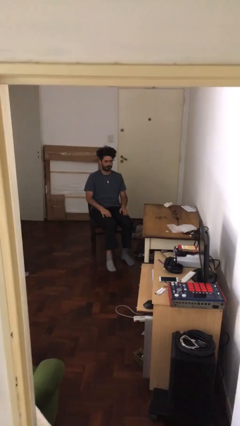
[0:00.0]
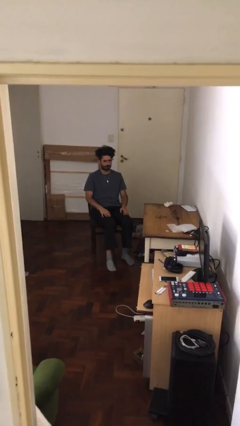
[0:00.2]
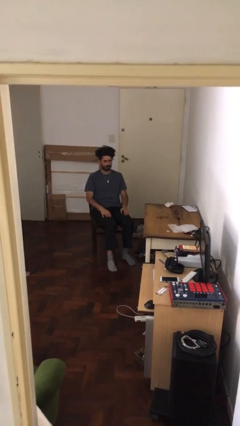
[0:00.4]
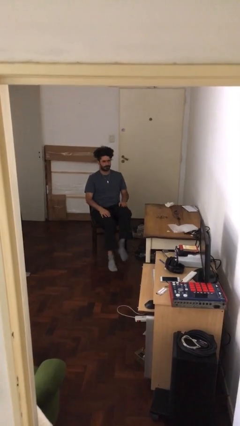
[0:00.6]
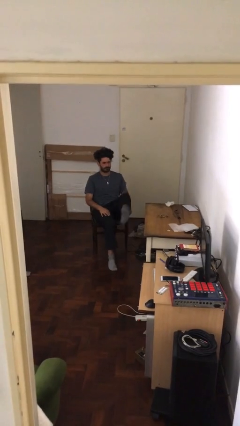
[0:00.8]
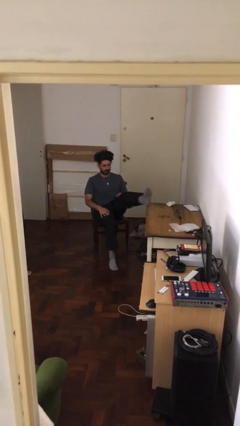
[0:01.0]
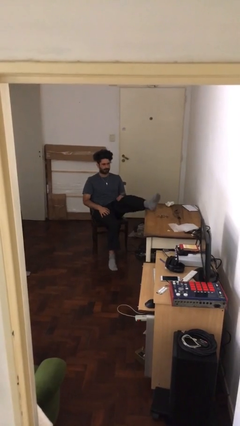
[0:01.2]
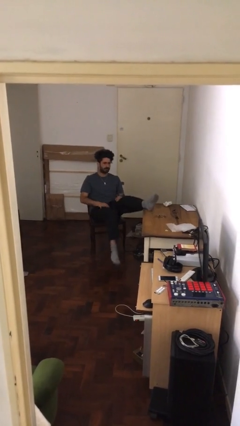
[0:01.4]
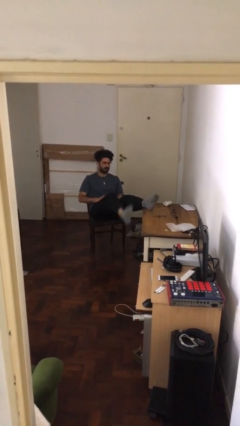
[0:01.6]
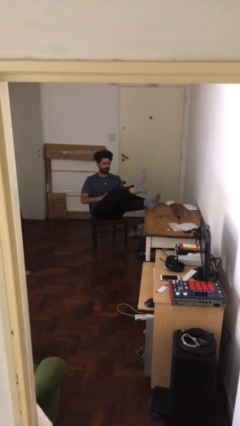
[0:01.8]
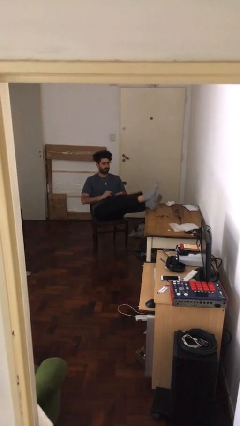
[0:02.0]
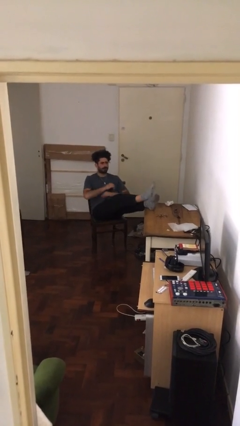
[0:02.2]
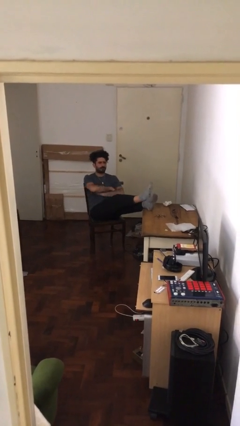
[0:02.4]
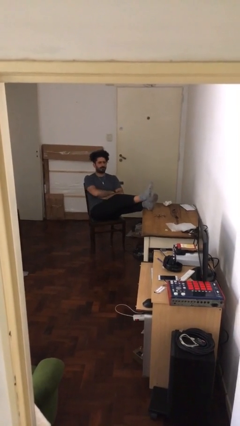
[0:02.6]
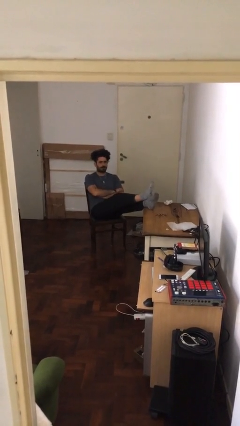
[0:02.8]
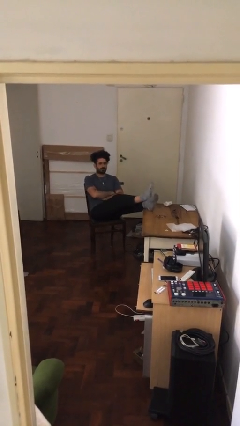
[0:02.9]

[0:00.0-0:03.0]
person puts feet up

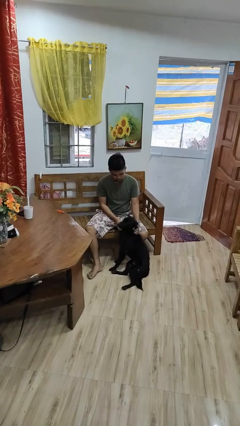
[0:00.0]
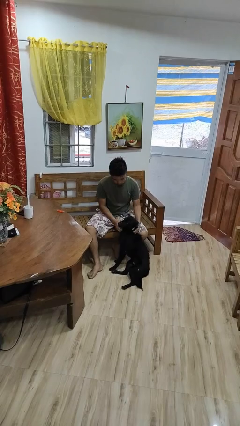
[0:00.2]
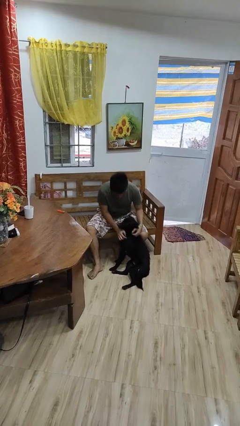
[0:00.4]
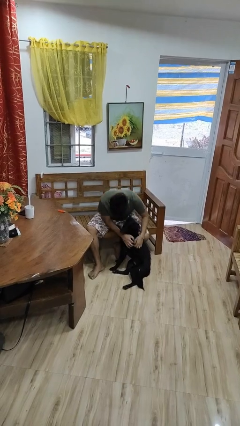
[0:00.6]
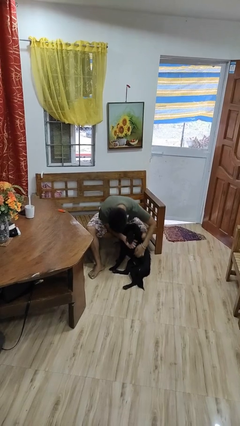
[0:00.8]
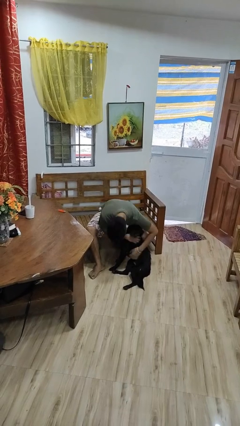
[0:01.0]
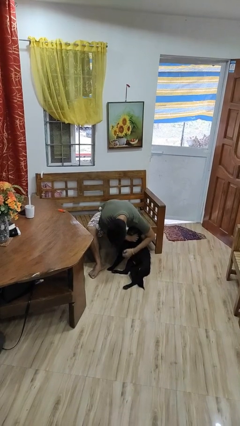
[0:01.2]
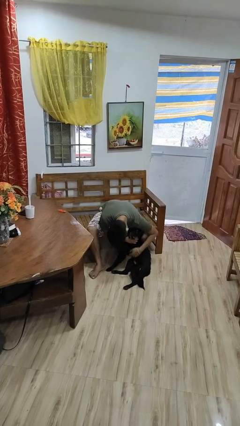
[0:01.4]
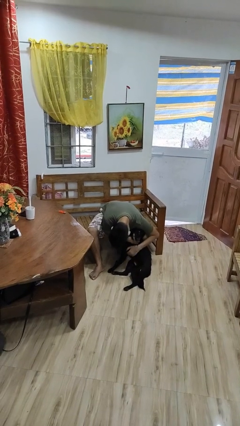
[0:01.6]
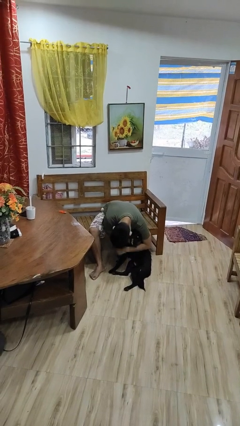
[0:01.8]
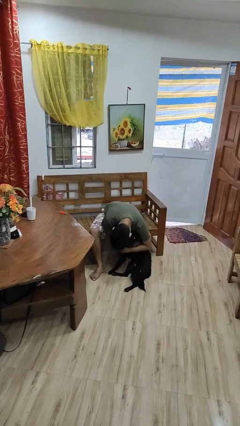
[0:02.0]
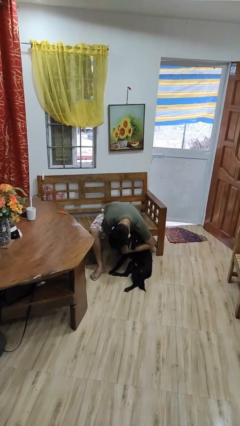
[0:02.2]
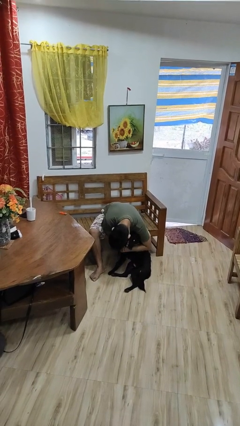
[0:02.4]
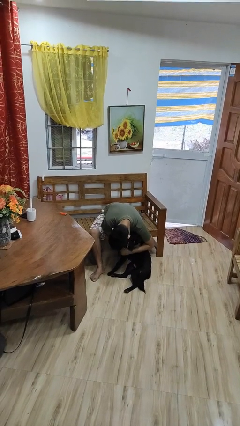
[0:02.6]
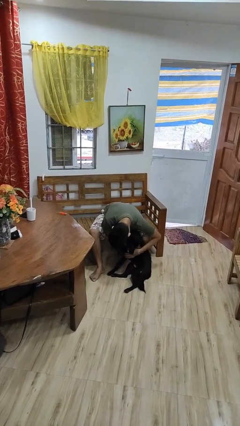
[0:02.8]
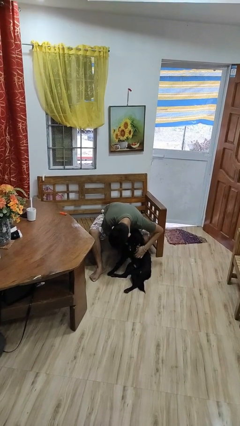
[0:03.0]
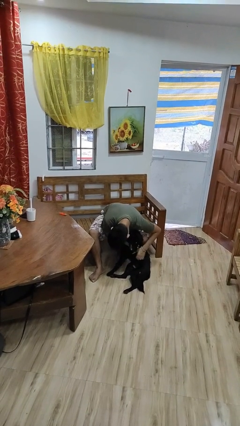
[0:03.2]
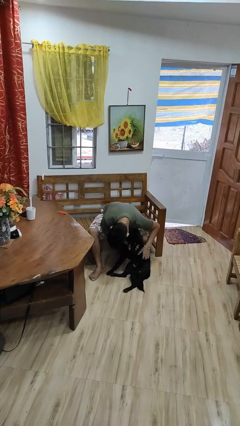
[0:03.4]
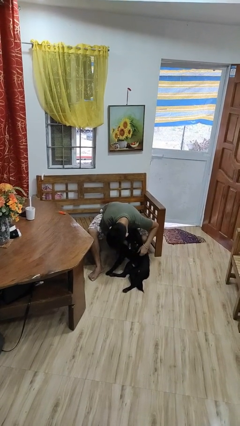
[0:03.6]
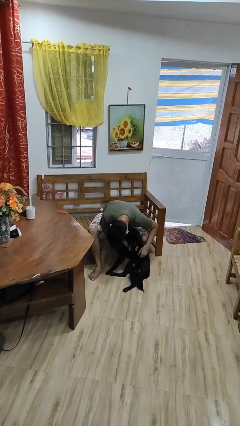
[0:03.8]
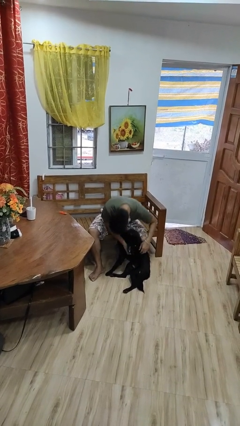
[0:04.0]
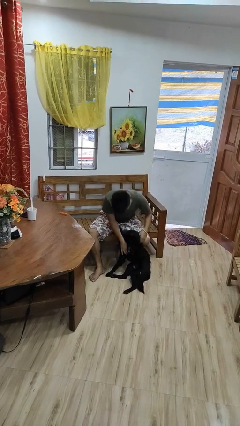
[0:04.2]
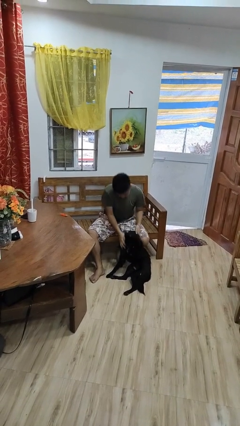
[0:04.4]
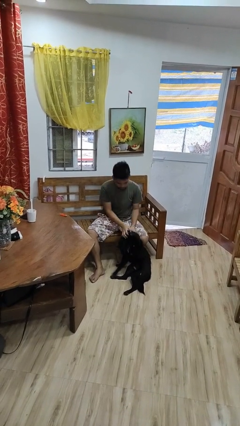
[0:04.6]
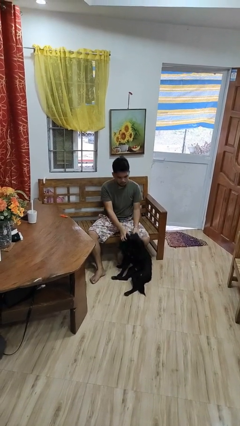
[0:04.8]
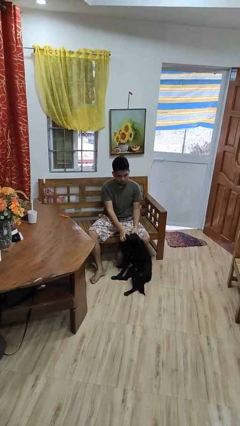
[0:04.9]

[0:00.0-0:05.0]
person hugs dog

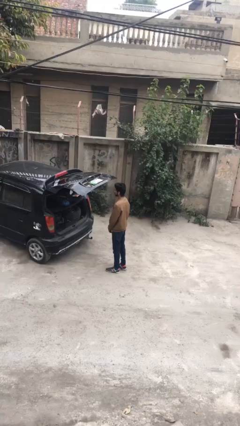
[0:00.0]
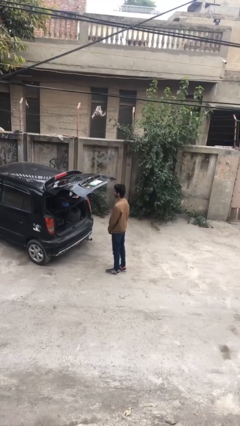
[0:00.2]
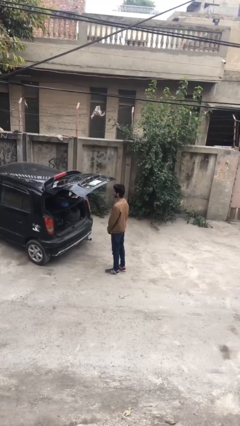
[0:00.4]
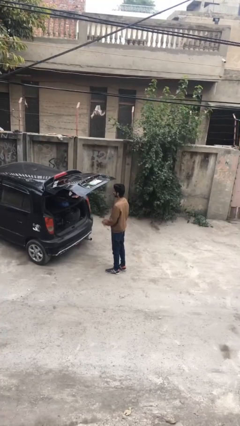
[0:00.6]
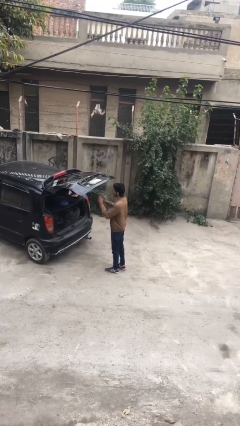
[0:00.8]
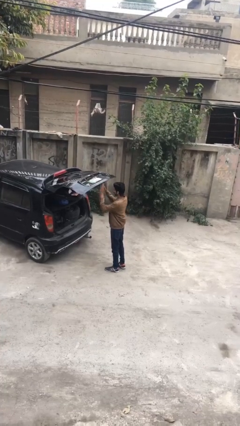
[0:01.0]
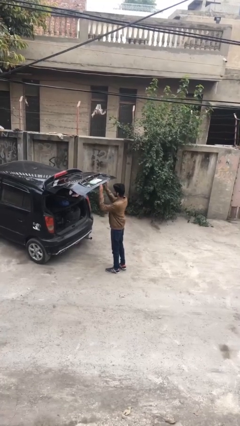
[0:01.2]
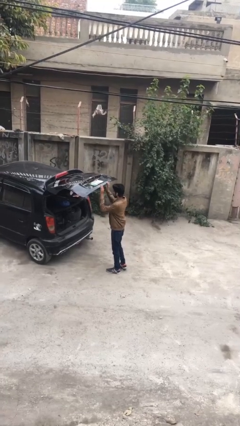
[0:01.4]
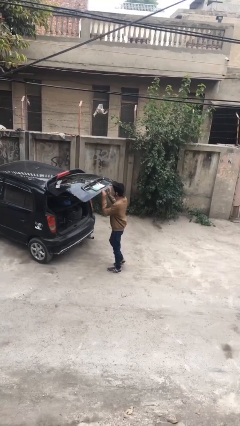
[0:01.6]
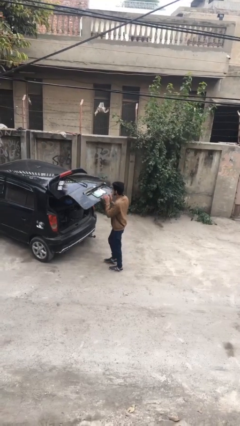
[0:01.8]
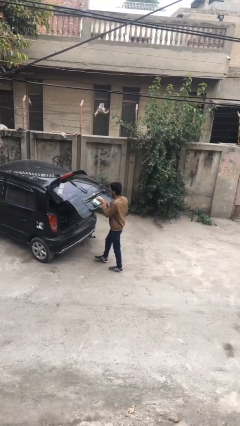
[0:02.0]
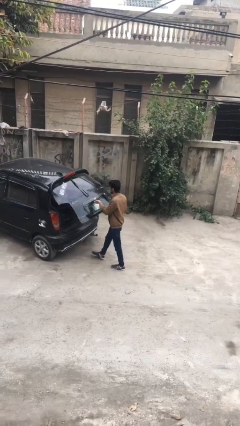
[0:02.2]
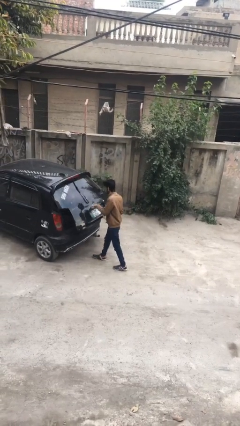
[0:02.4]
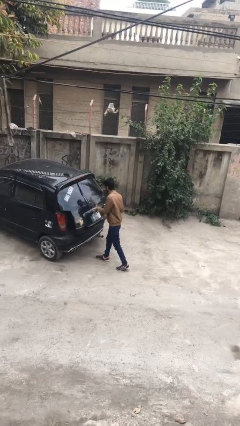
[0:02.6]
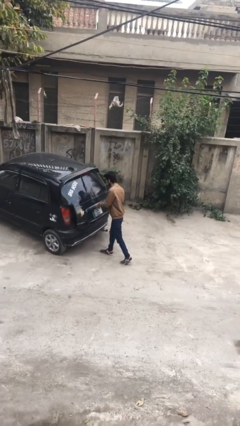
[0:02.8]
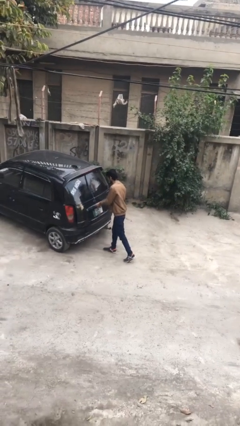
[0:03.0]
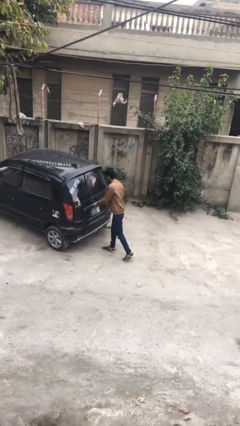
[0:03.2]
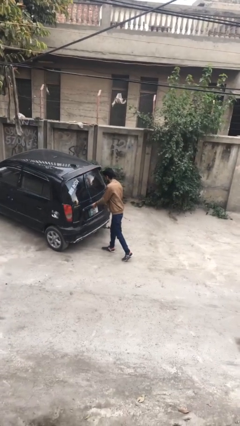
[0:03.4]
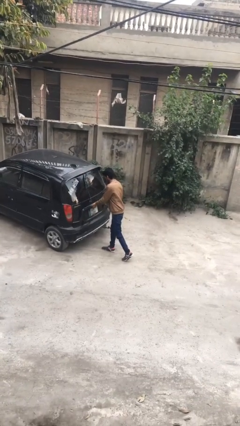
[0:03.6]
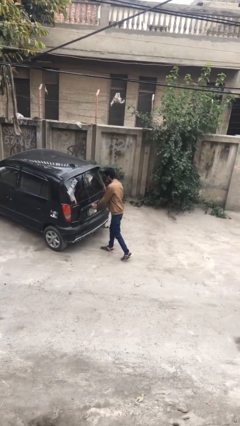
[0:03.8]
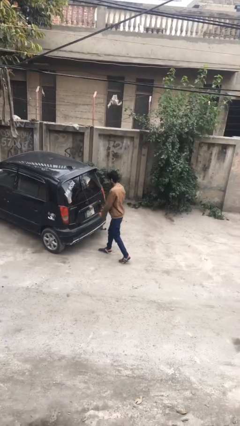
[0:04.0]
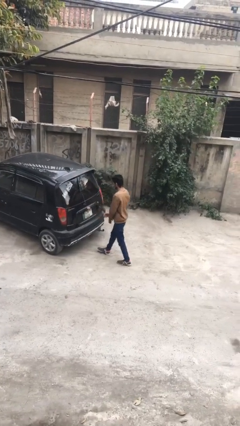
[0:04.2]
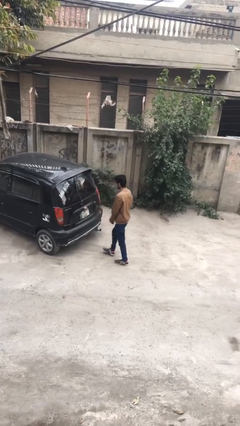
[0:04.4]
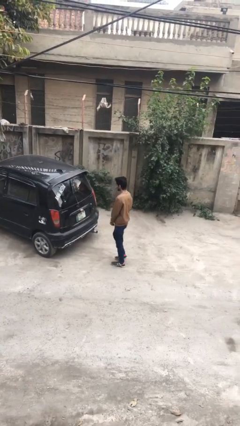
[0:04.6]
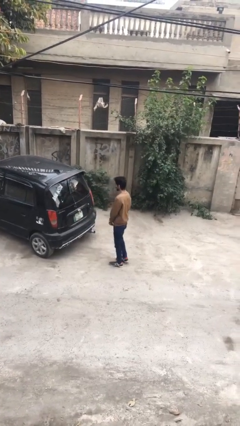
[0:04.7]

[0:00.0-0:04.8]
person closes car trunk

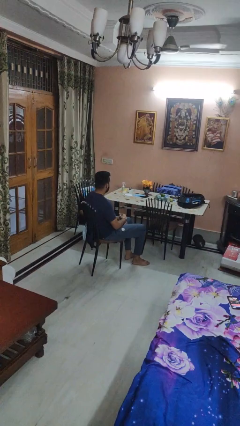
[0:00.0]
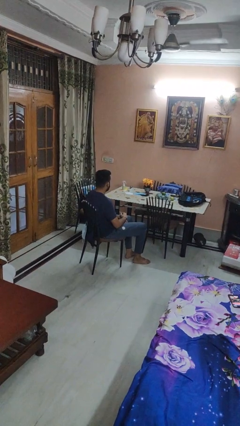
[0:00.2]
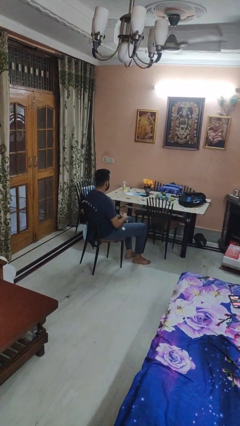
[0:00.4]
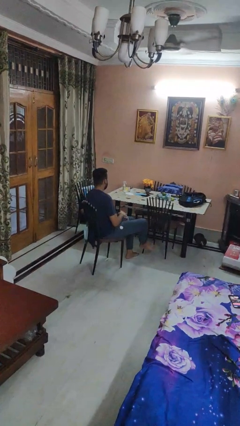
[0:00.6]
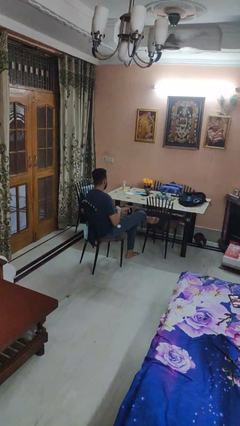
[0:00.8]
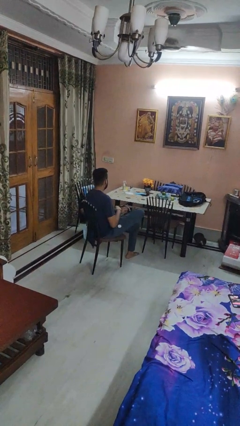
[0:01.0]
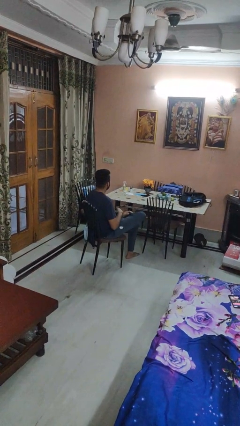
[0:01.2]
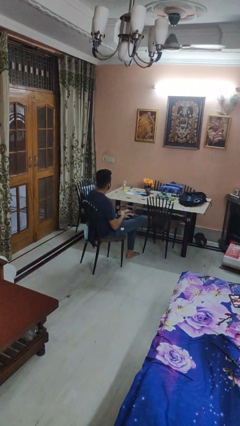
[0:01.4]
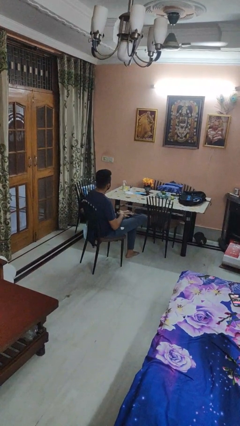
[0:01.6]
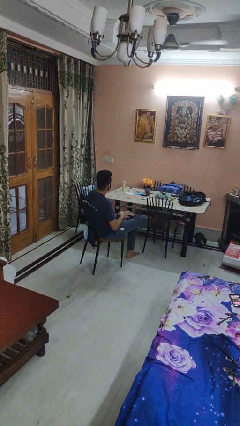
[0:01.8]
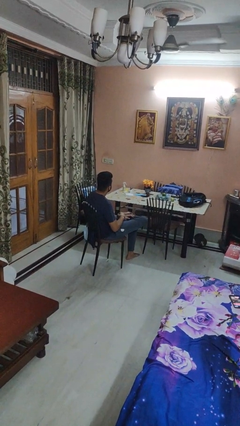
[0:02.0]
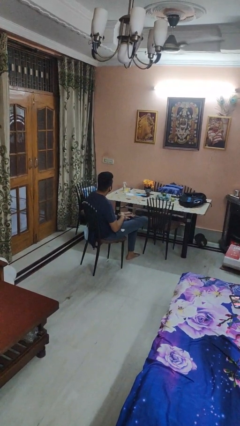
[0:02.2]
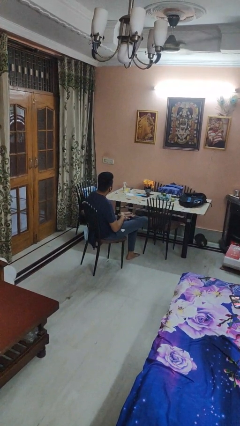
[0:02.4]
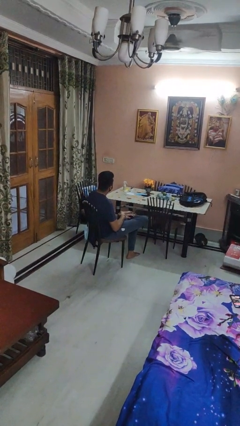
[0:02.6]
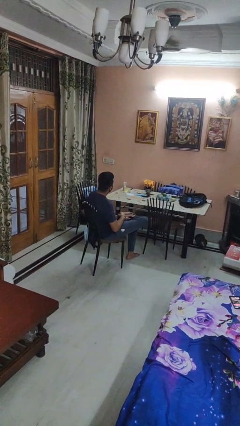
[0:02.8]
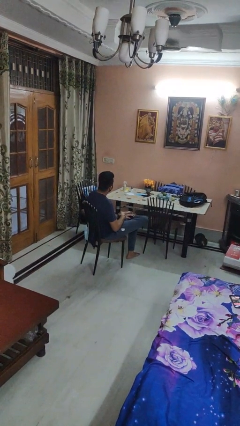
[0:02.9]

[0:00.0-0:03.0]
person crosses legs

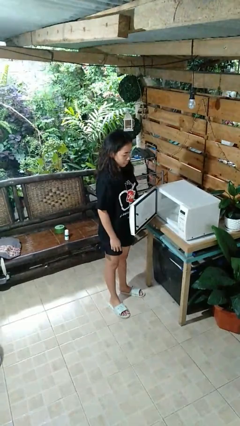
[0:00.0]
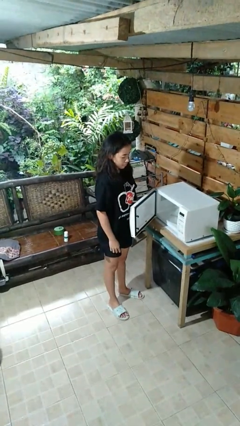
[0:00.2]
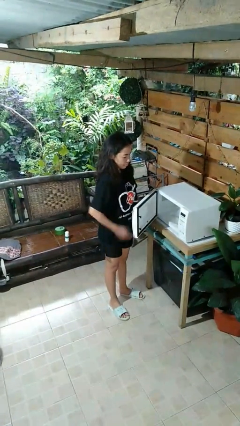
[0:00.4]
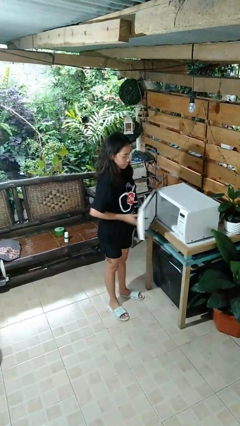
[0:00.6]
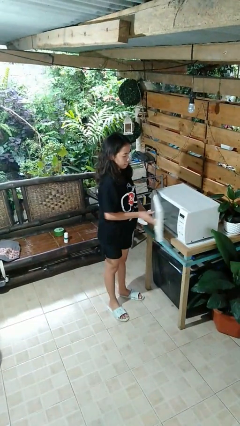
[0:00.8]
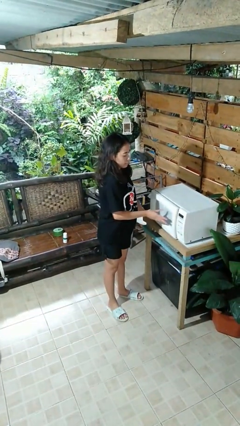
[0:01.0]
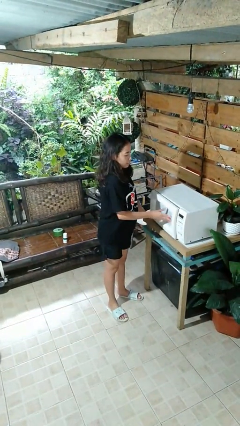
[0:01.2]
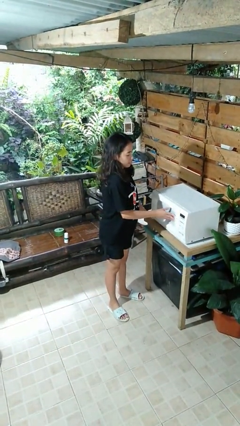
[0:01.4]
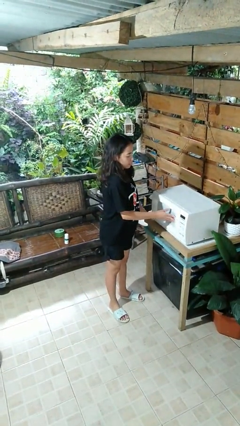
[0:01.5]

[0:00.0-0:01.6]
person closes microwave
